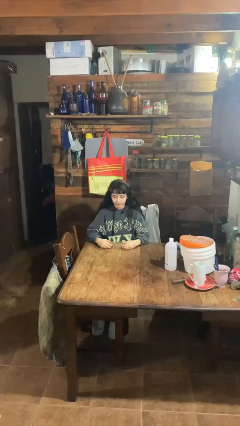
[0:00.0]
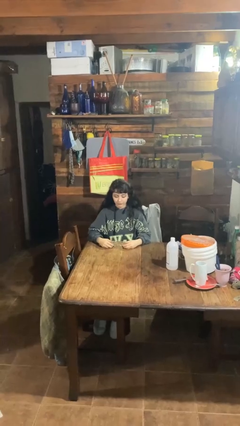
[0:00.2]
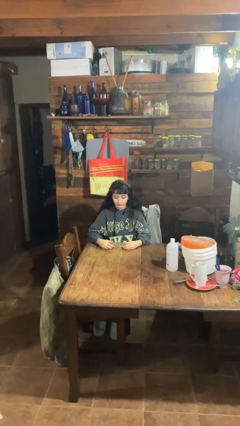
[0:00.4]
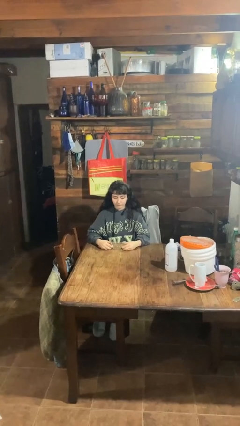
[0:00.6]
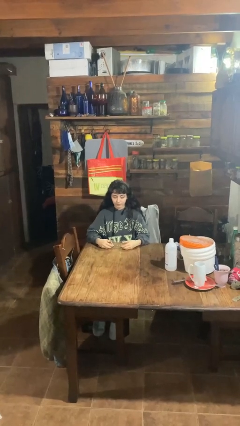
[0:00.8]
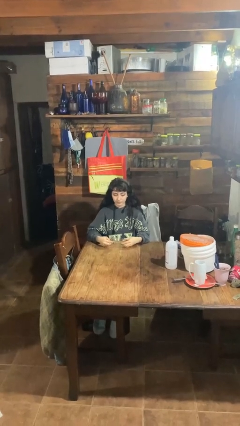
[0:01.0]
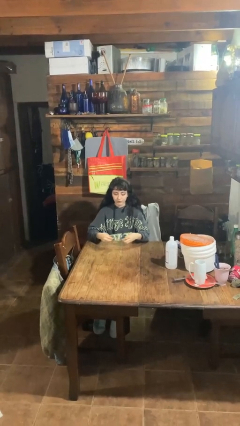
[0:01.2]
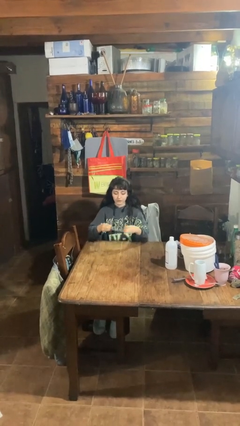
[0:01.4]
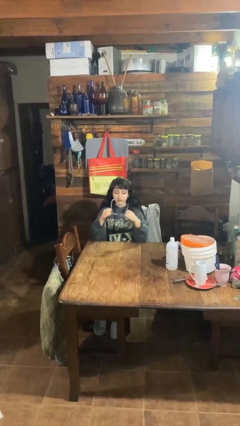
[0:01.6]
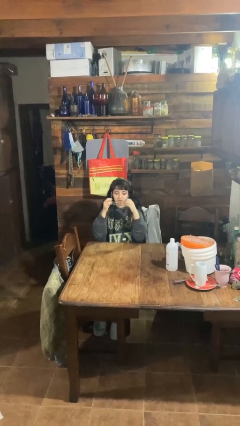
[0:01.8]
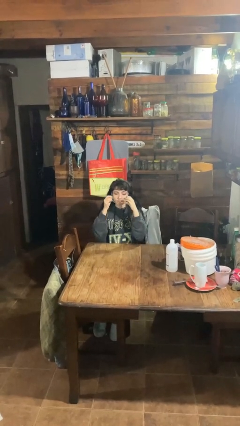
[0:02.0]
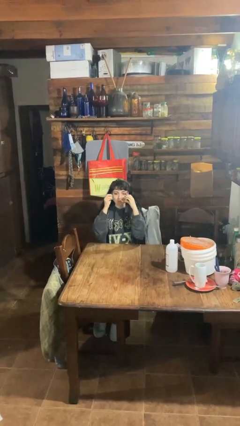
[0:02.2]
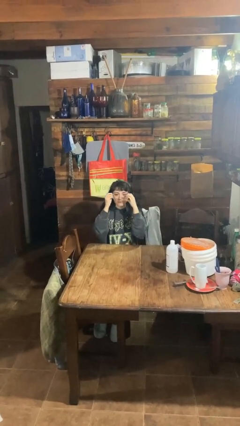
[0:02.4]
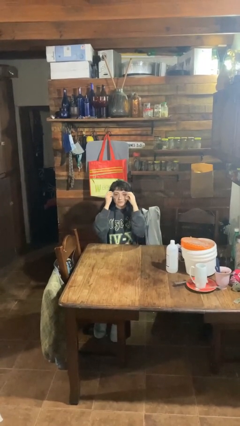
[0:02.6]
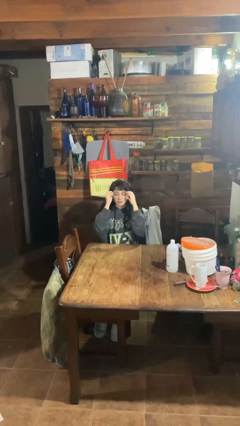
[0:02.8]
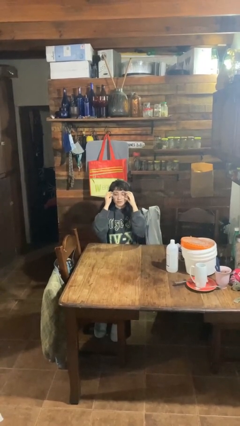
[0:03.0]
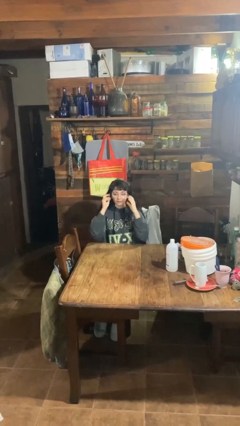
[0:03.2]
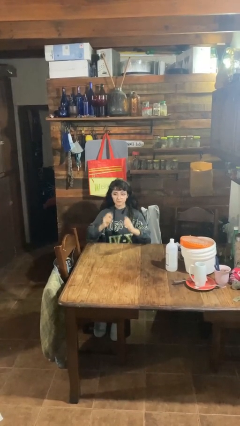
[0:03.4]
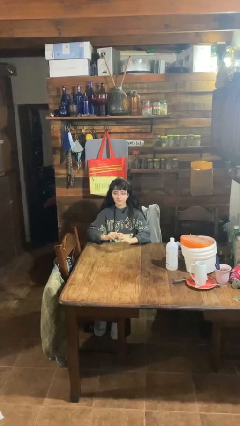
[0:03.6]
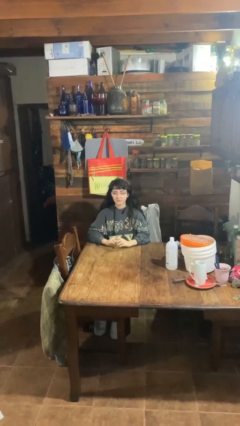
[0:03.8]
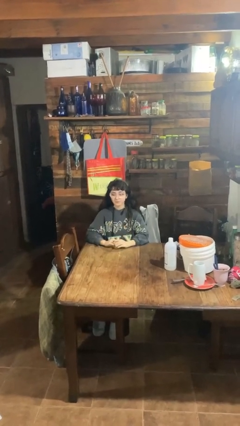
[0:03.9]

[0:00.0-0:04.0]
person puts on glasses

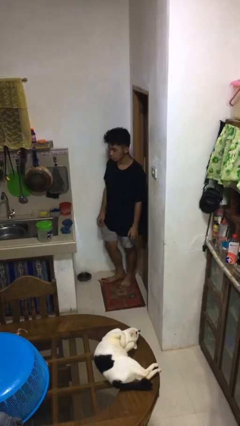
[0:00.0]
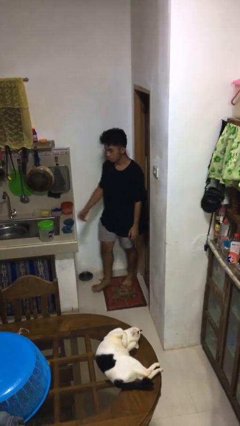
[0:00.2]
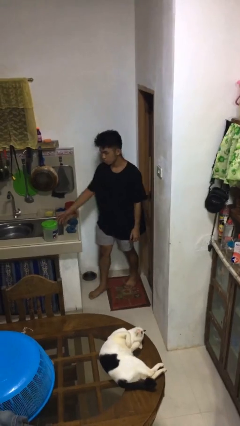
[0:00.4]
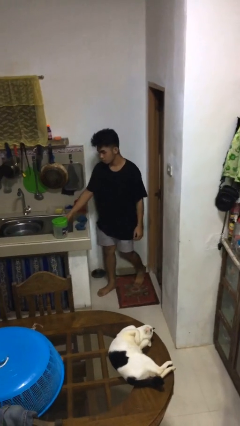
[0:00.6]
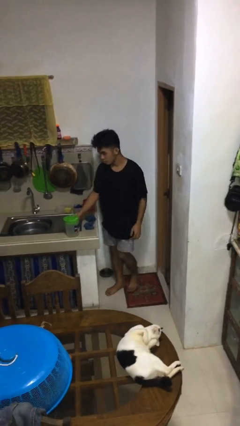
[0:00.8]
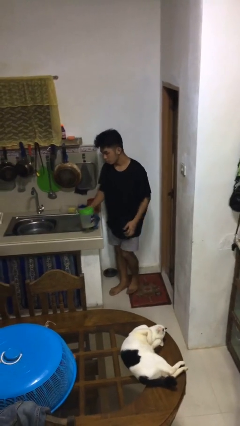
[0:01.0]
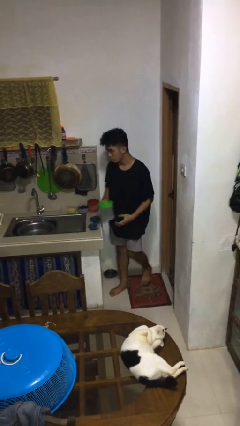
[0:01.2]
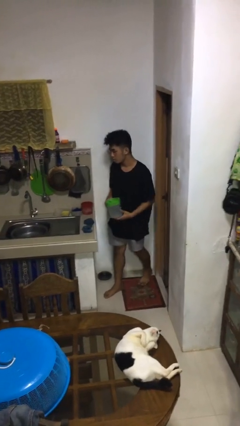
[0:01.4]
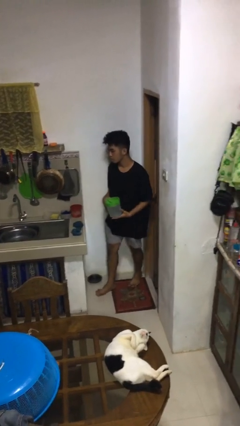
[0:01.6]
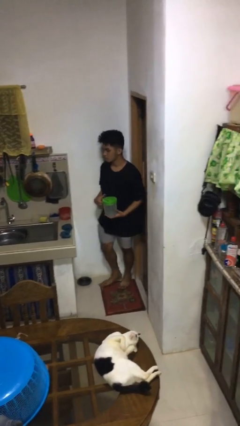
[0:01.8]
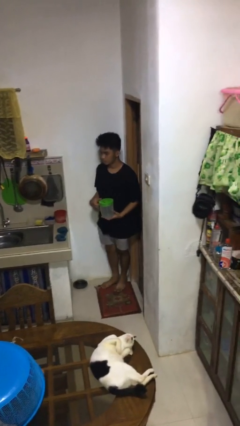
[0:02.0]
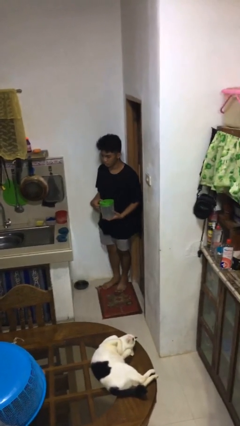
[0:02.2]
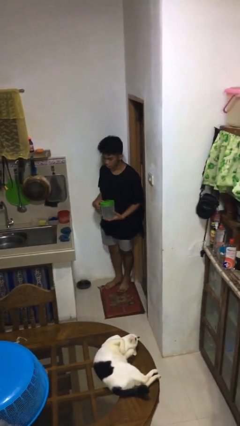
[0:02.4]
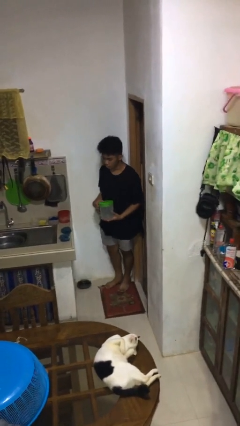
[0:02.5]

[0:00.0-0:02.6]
person picks up object from countertop

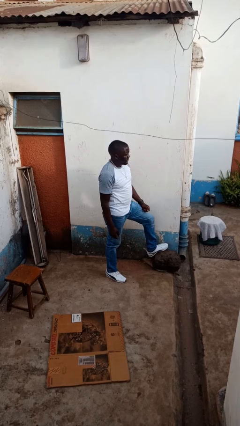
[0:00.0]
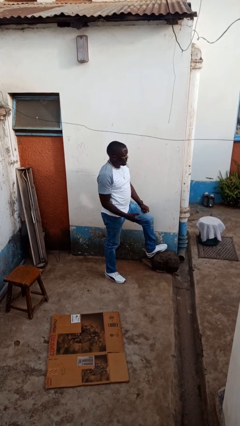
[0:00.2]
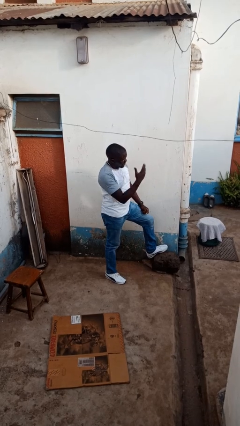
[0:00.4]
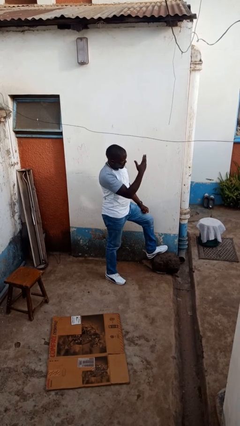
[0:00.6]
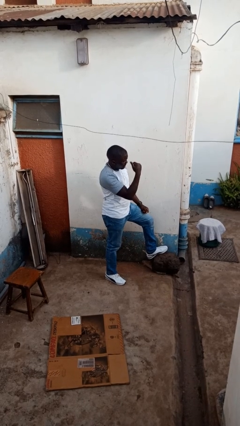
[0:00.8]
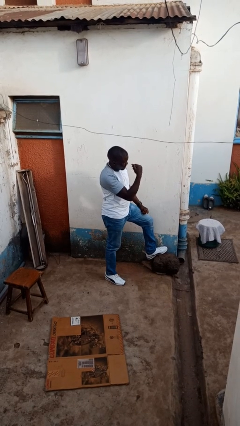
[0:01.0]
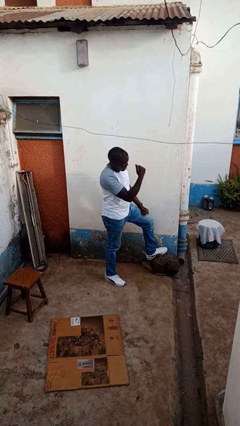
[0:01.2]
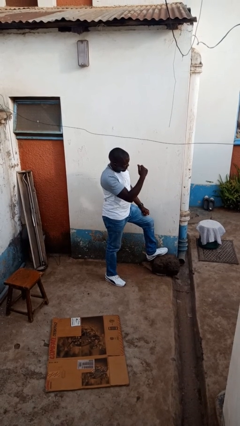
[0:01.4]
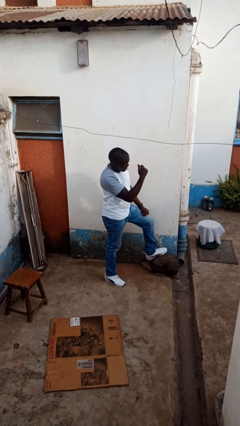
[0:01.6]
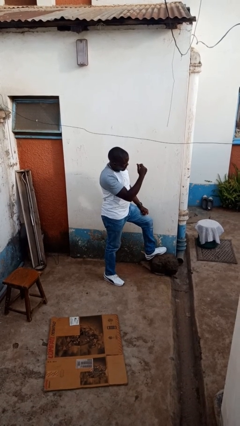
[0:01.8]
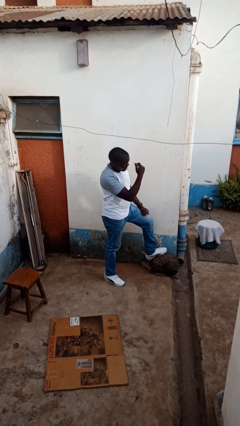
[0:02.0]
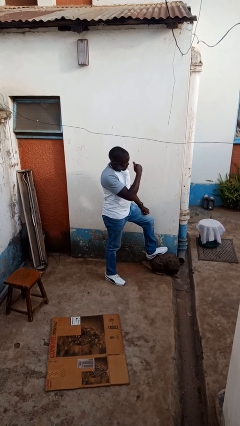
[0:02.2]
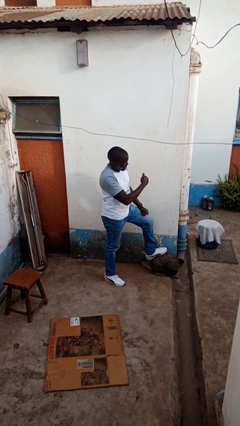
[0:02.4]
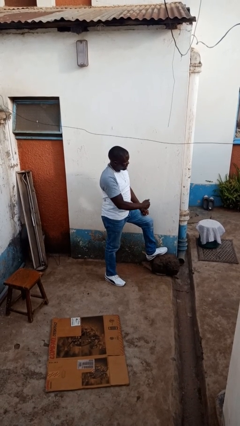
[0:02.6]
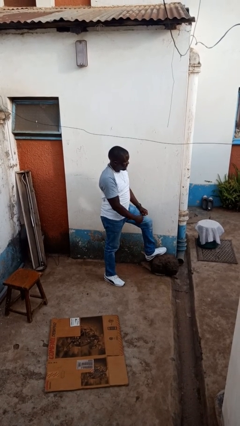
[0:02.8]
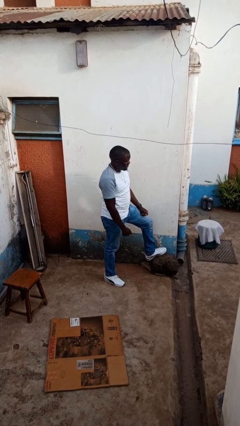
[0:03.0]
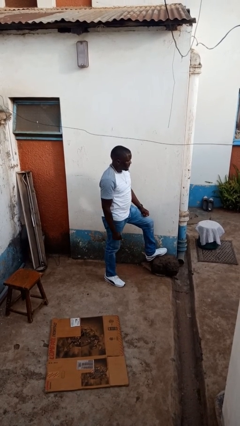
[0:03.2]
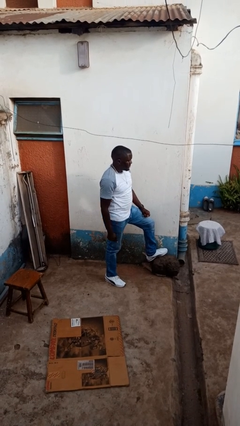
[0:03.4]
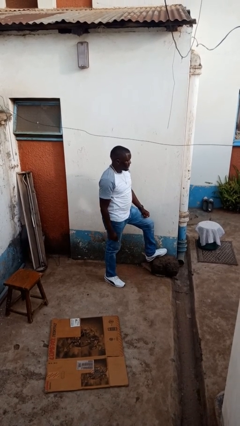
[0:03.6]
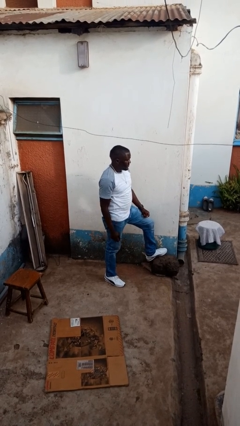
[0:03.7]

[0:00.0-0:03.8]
person gestures come here

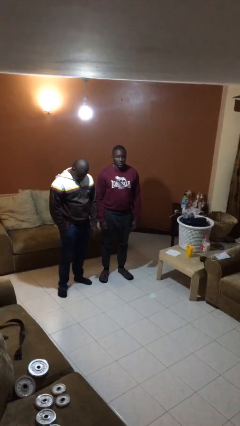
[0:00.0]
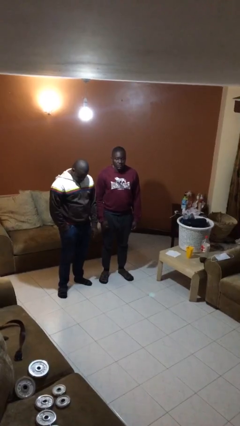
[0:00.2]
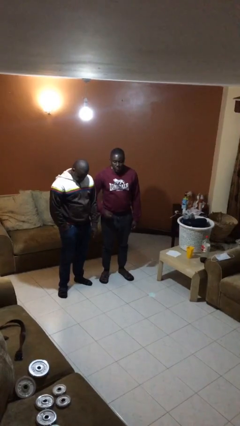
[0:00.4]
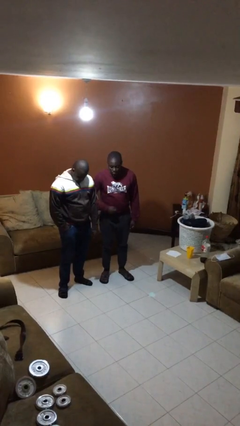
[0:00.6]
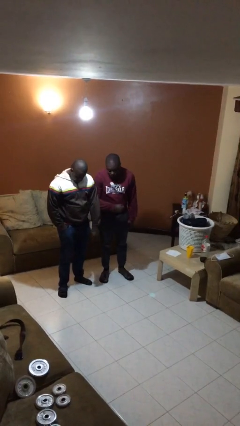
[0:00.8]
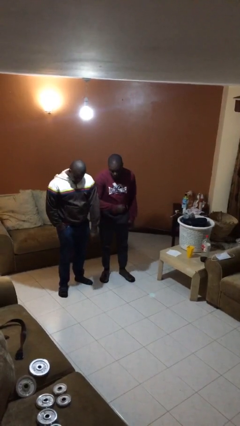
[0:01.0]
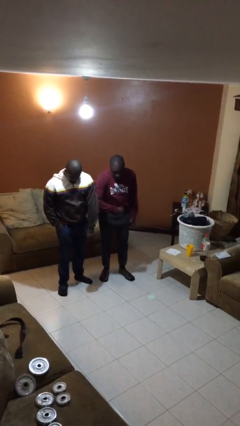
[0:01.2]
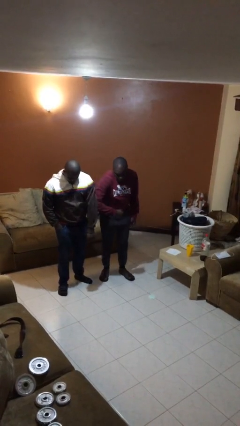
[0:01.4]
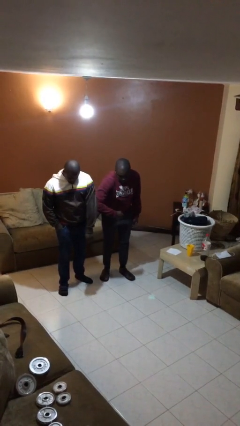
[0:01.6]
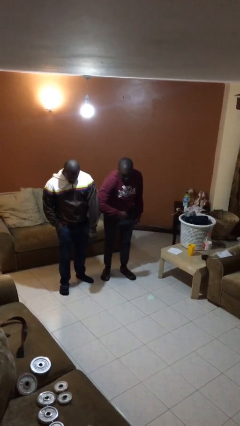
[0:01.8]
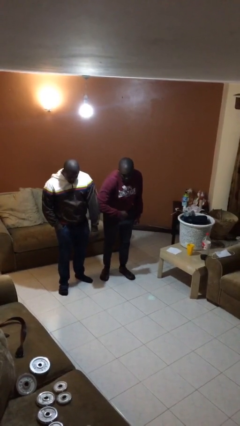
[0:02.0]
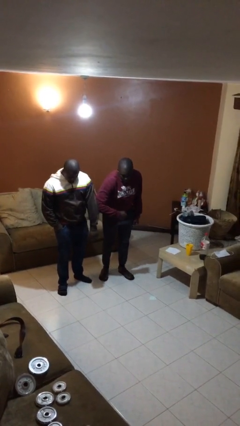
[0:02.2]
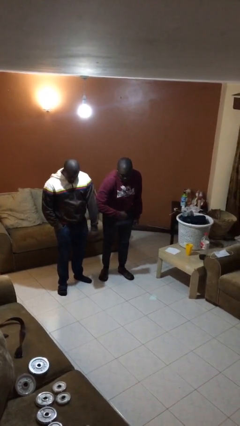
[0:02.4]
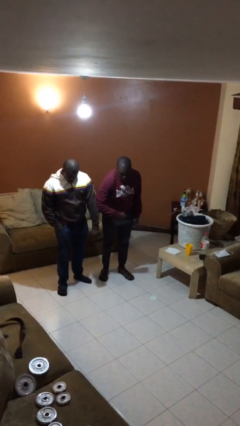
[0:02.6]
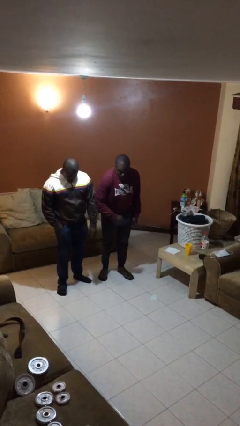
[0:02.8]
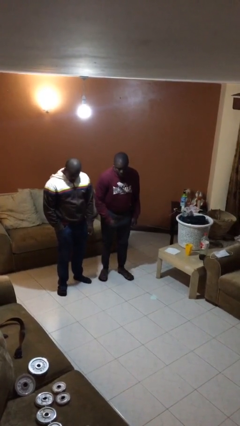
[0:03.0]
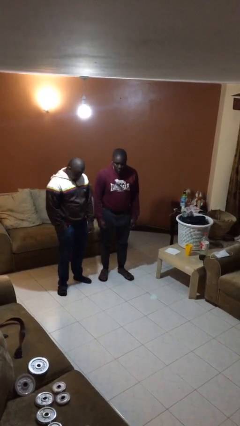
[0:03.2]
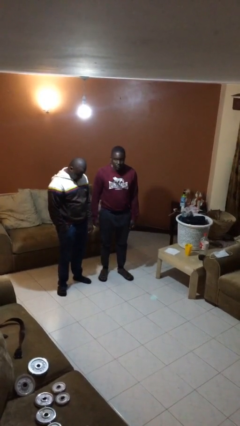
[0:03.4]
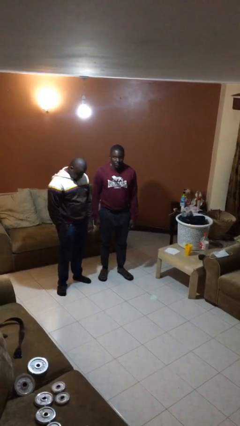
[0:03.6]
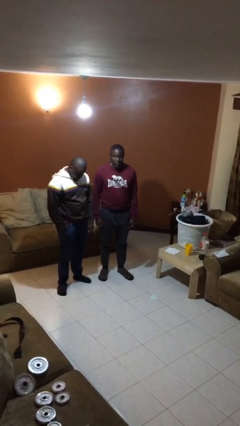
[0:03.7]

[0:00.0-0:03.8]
person nudges person with elbow

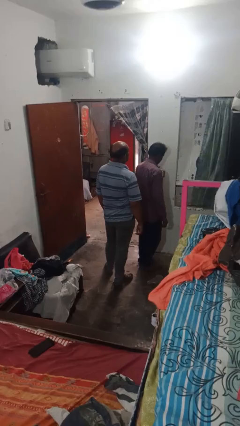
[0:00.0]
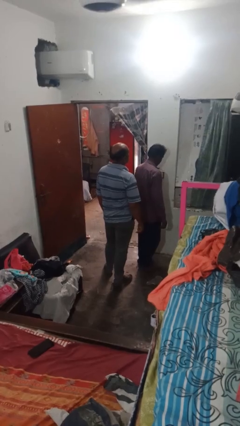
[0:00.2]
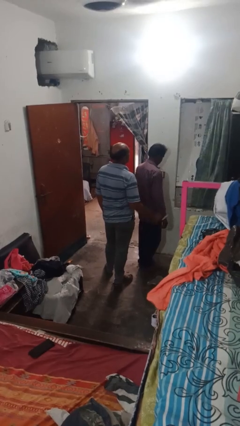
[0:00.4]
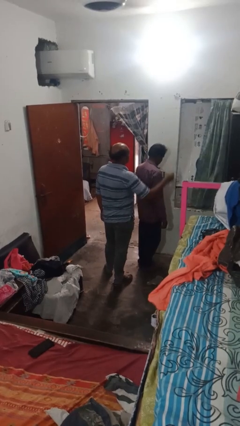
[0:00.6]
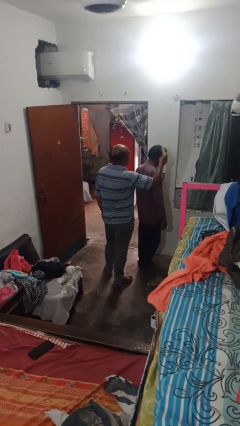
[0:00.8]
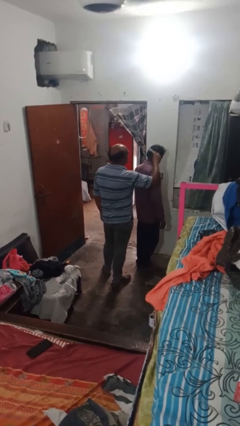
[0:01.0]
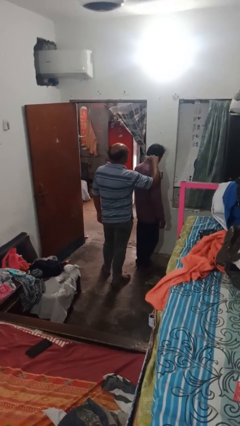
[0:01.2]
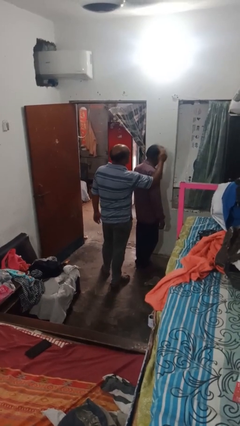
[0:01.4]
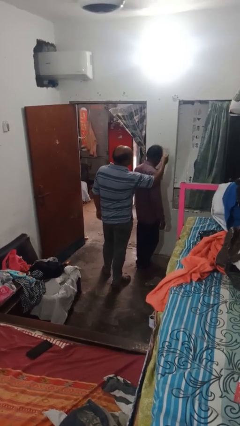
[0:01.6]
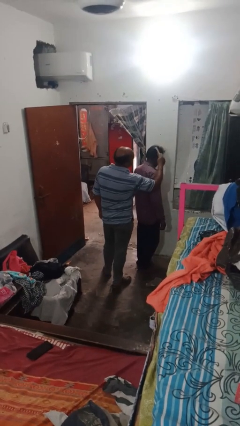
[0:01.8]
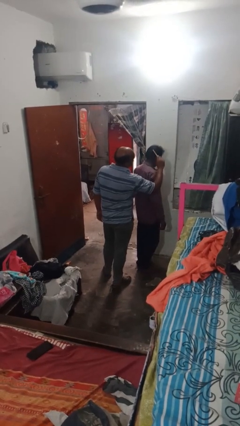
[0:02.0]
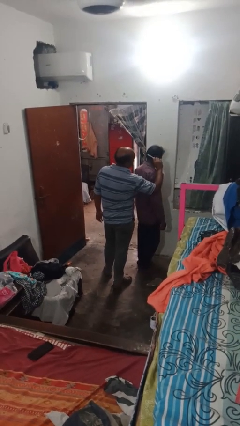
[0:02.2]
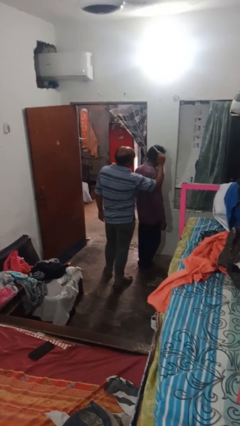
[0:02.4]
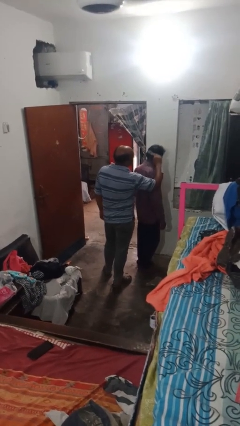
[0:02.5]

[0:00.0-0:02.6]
person brushes hair of person

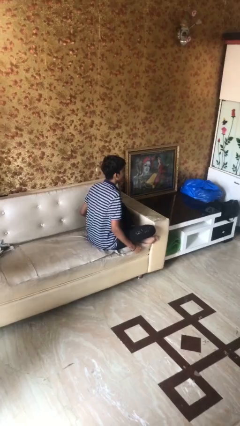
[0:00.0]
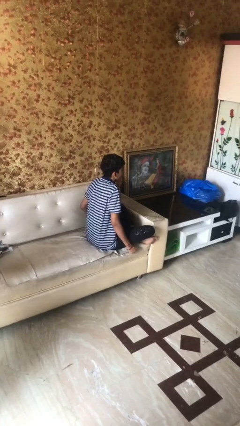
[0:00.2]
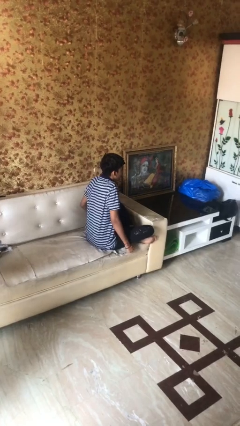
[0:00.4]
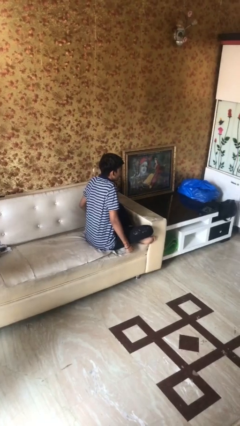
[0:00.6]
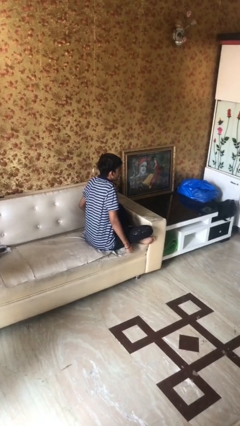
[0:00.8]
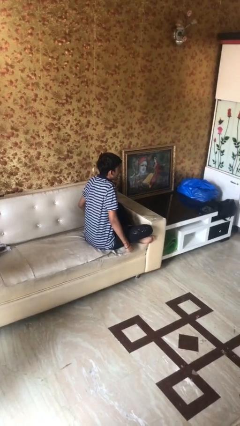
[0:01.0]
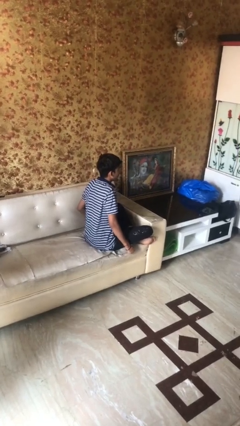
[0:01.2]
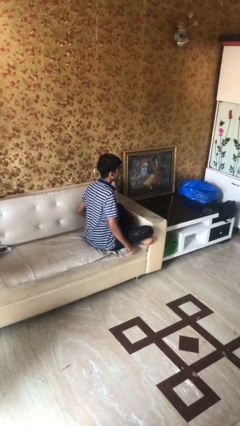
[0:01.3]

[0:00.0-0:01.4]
person shrugs
